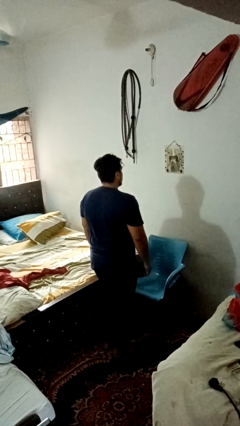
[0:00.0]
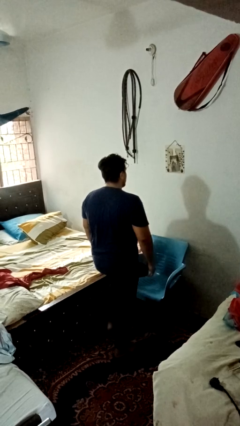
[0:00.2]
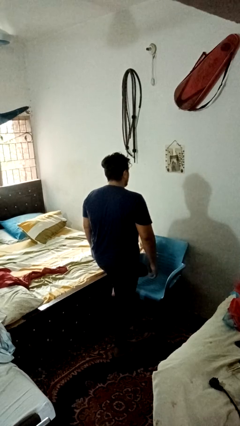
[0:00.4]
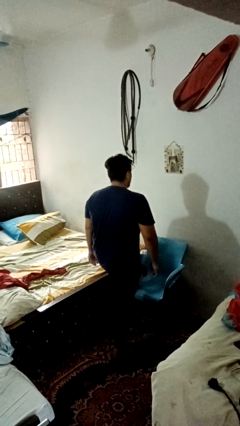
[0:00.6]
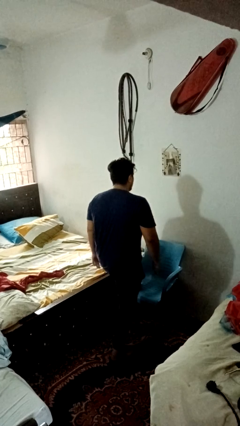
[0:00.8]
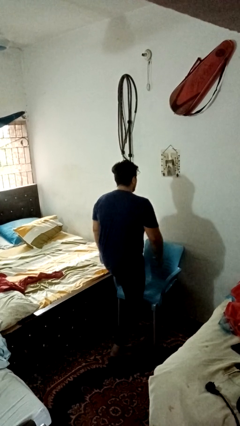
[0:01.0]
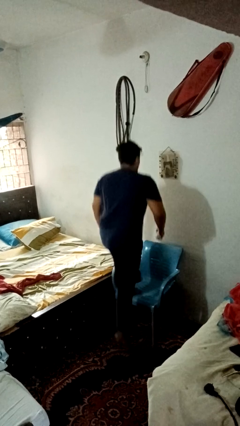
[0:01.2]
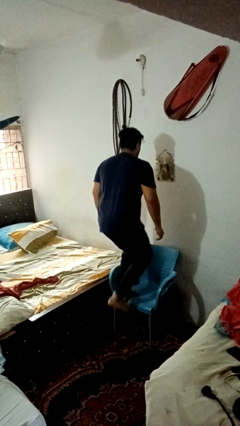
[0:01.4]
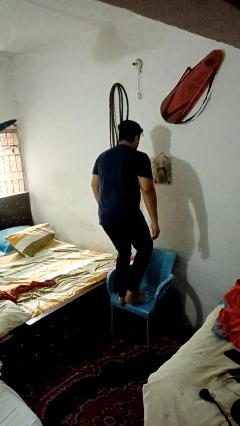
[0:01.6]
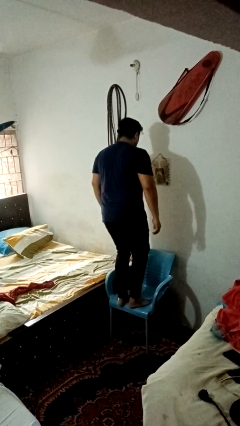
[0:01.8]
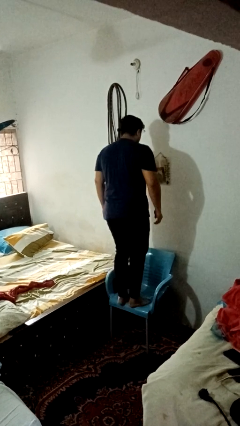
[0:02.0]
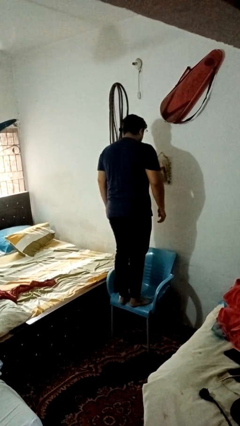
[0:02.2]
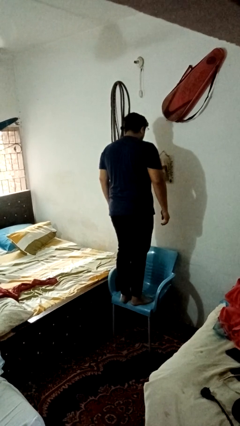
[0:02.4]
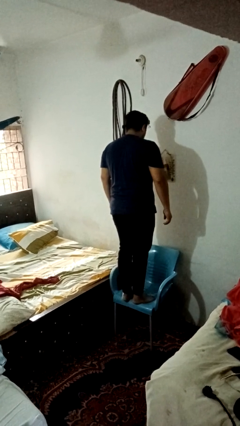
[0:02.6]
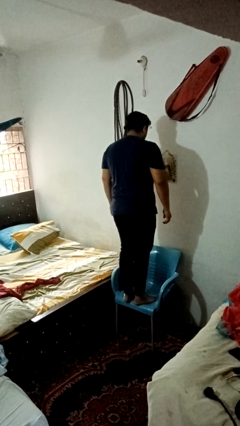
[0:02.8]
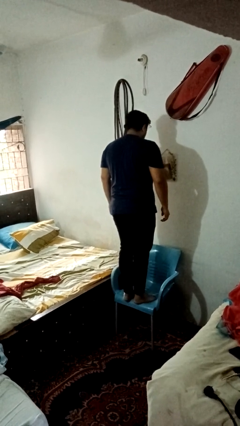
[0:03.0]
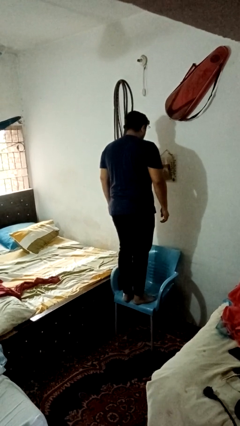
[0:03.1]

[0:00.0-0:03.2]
person climbs on chair

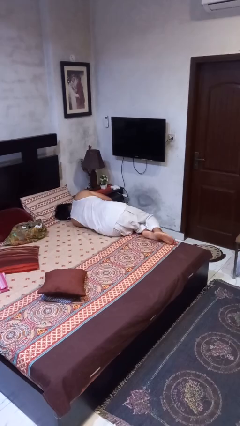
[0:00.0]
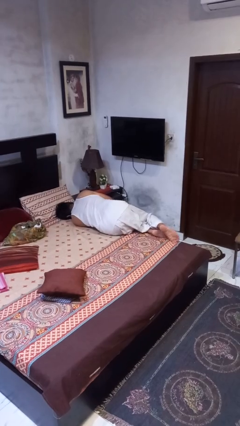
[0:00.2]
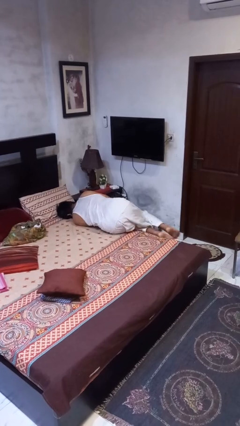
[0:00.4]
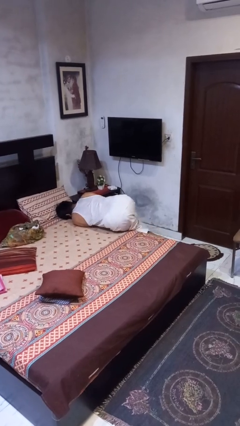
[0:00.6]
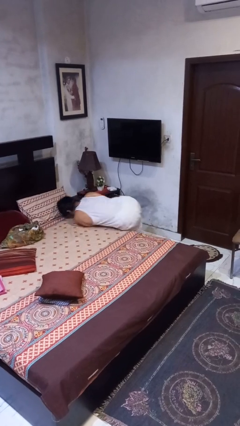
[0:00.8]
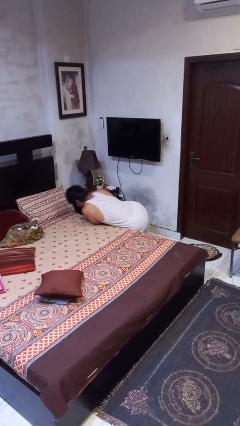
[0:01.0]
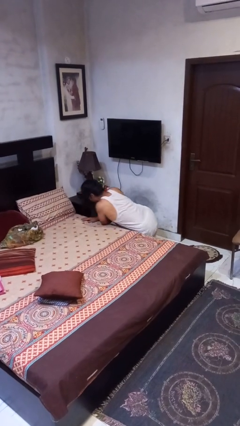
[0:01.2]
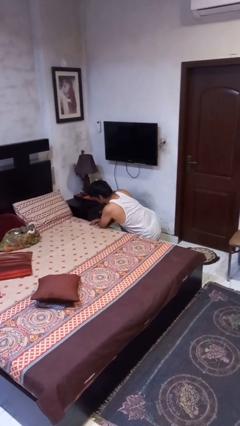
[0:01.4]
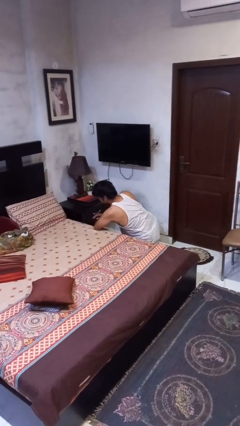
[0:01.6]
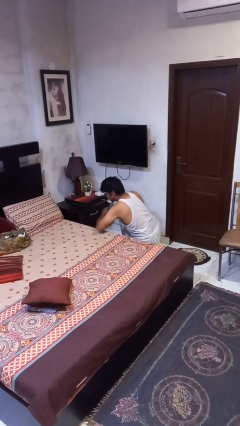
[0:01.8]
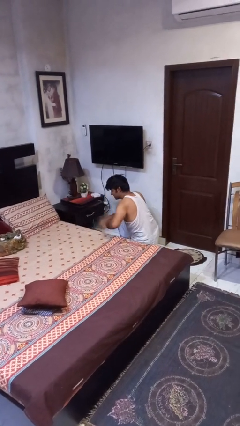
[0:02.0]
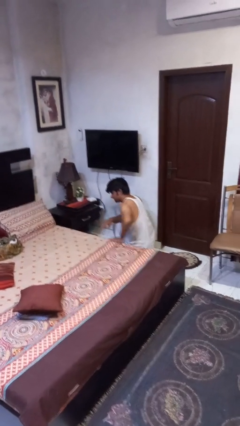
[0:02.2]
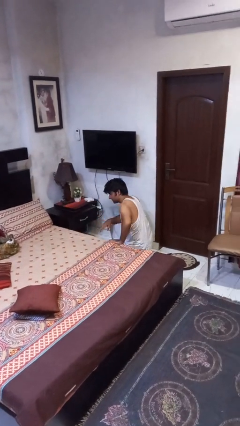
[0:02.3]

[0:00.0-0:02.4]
person falls from bed

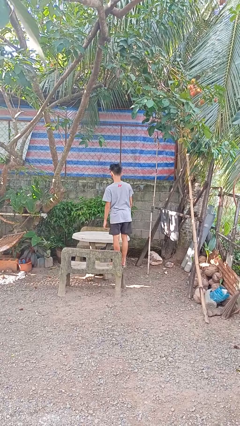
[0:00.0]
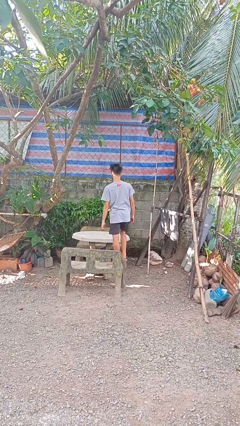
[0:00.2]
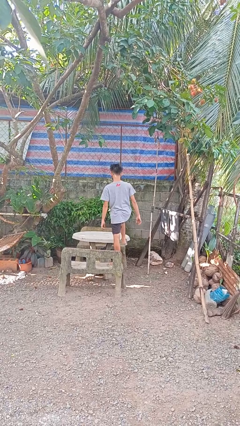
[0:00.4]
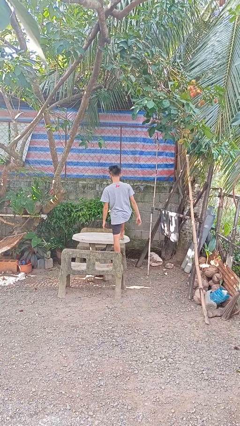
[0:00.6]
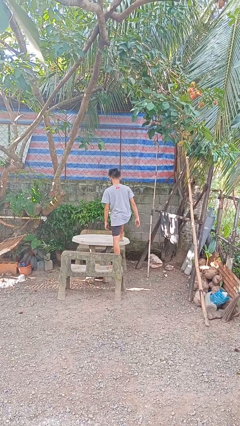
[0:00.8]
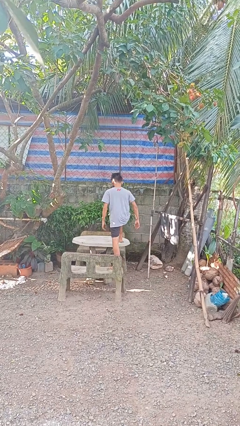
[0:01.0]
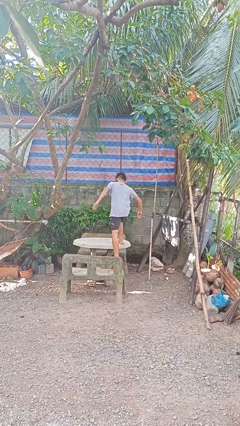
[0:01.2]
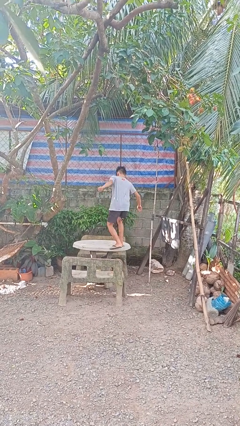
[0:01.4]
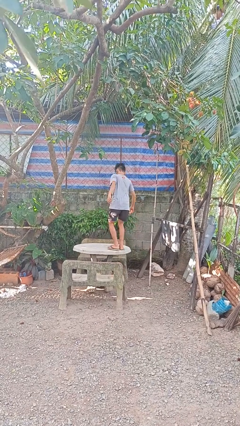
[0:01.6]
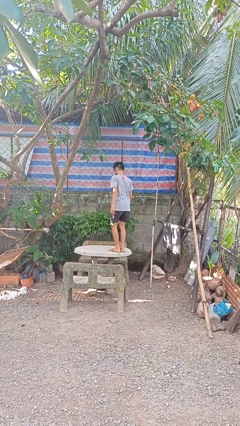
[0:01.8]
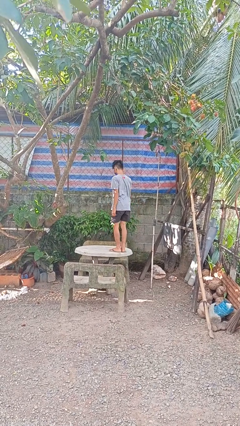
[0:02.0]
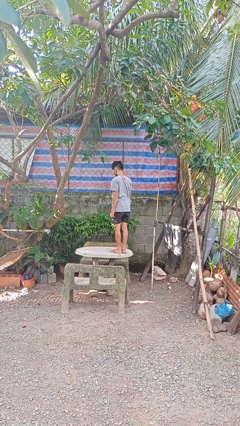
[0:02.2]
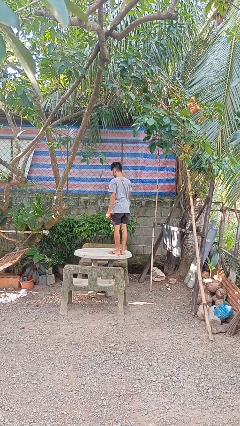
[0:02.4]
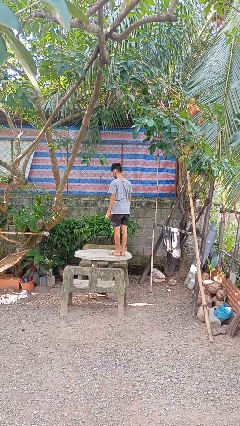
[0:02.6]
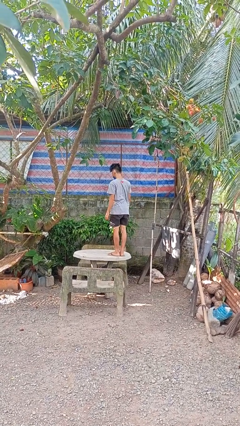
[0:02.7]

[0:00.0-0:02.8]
person climbs on table

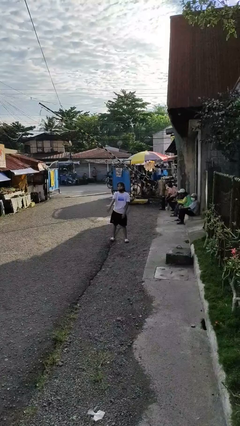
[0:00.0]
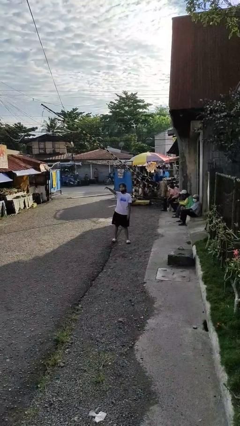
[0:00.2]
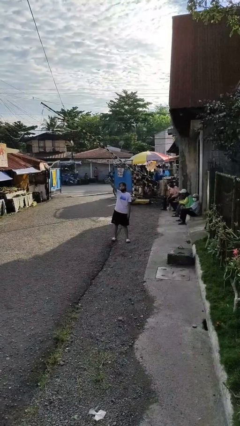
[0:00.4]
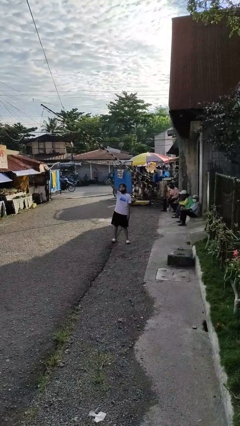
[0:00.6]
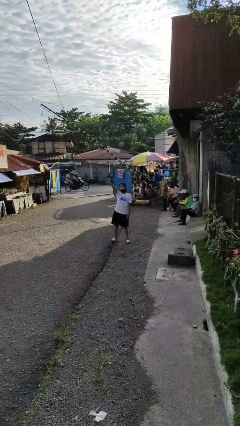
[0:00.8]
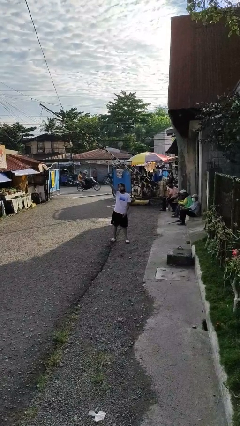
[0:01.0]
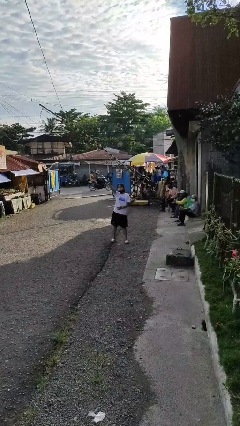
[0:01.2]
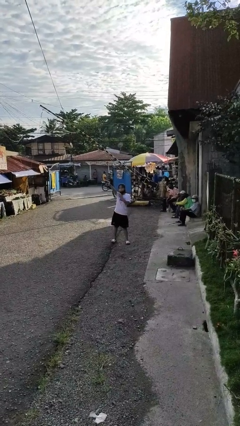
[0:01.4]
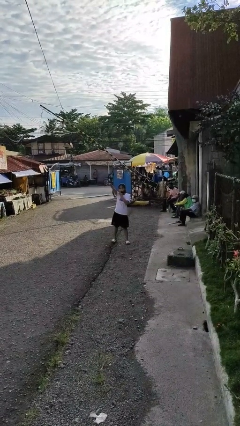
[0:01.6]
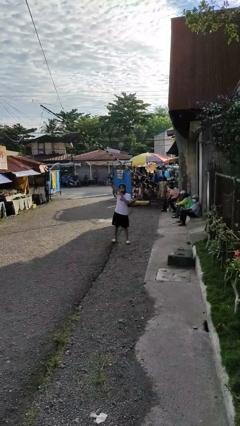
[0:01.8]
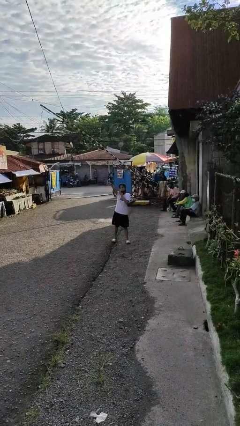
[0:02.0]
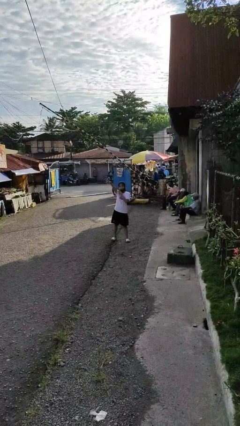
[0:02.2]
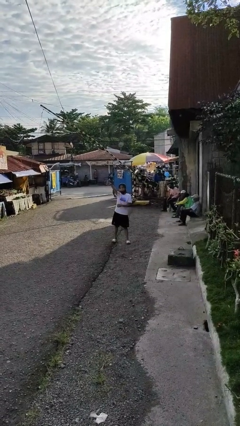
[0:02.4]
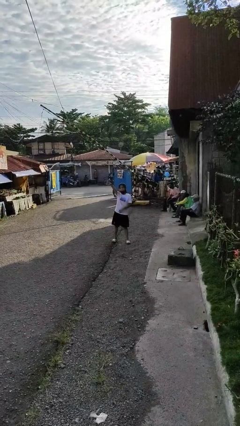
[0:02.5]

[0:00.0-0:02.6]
person points at person

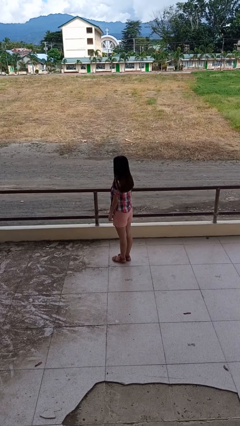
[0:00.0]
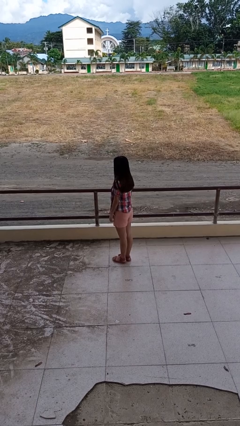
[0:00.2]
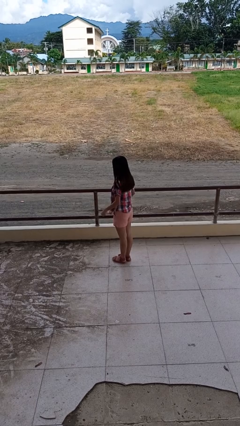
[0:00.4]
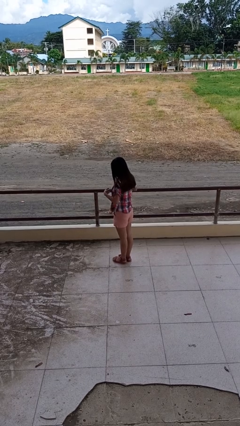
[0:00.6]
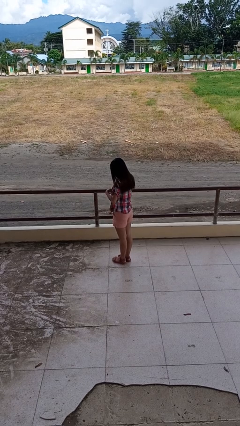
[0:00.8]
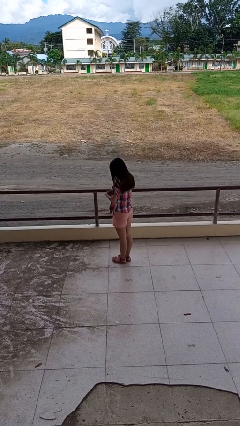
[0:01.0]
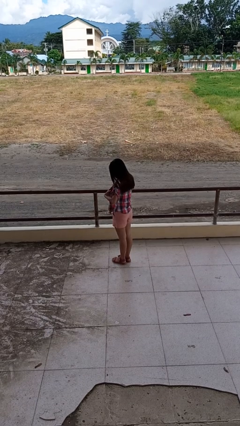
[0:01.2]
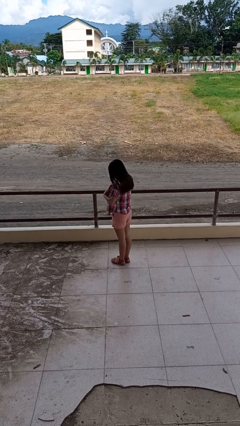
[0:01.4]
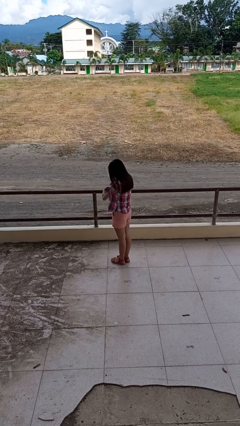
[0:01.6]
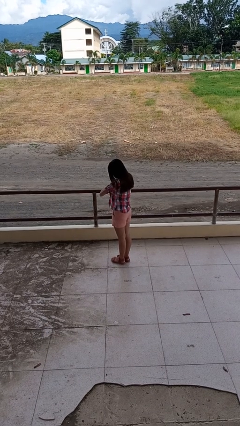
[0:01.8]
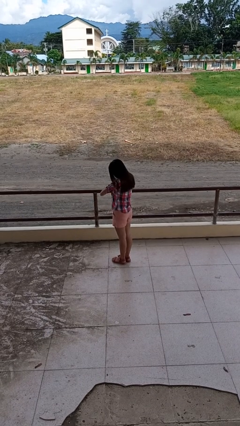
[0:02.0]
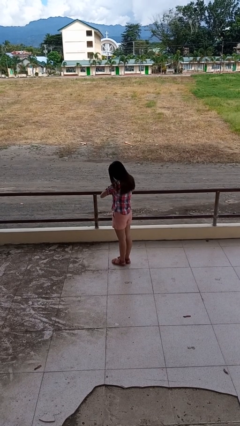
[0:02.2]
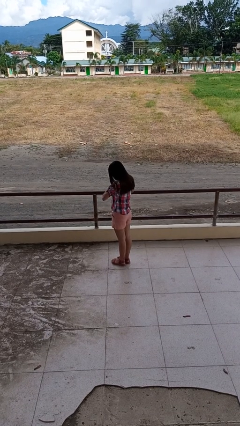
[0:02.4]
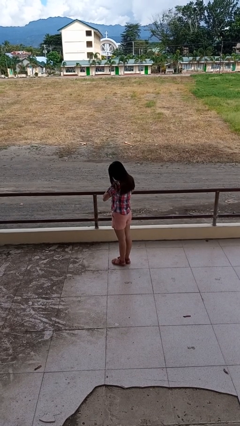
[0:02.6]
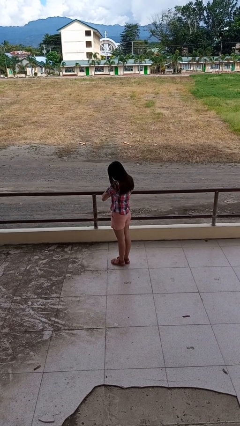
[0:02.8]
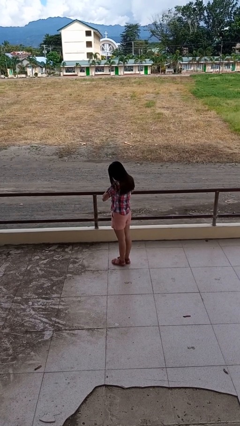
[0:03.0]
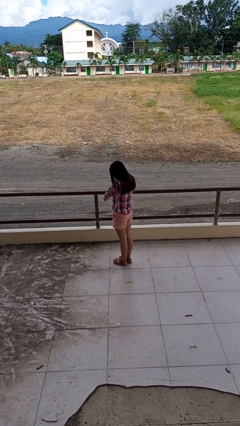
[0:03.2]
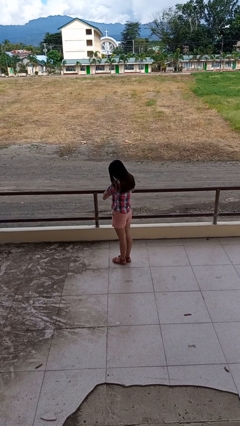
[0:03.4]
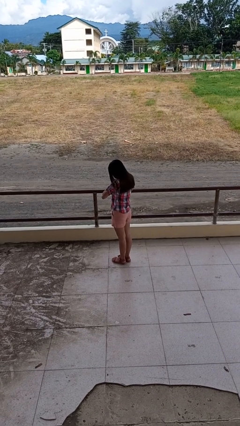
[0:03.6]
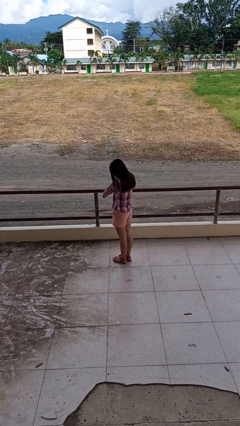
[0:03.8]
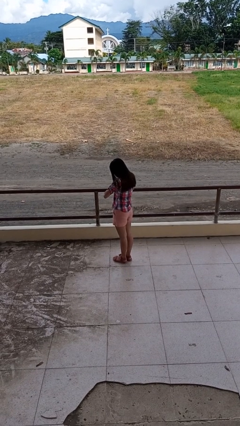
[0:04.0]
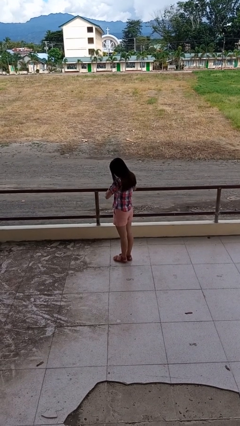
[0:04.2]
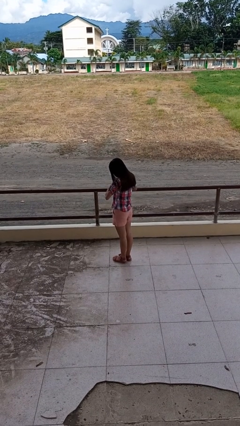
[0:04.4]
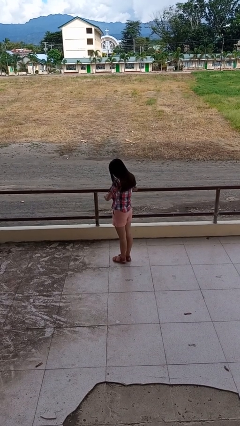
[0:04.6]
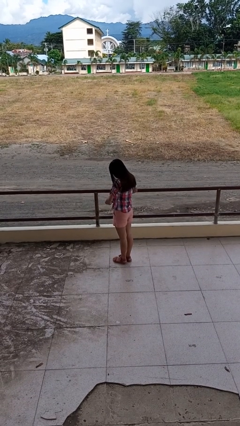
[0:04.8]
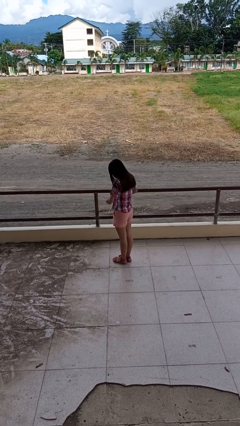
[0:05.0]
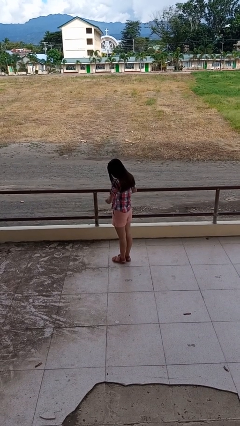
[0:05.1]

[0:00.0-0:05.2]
person buttons shirt

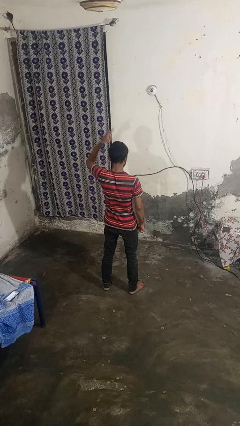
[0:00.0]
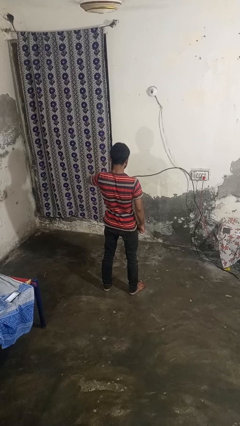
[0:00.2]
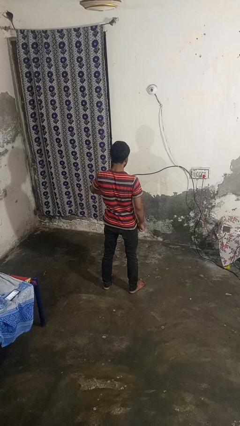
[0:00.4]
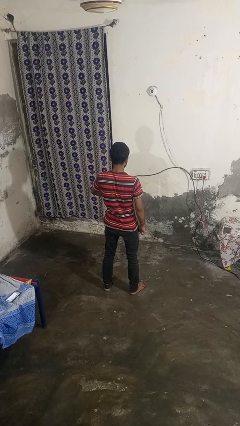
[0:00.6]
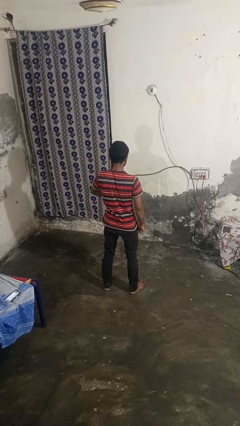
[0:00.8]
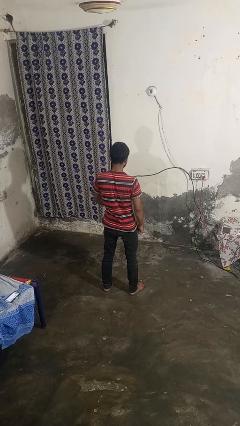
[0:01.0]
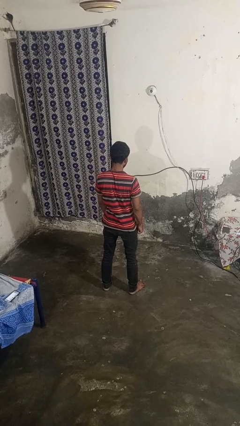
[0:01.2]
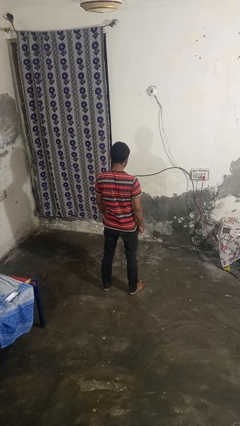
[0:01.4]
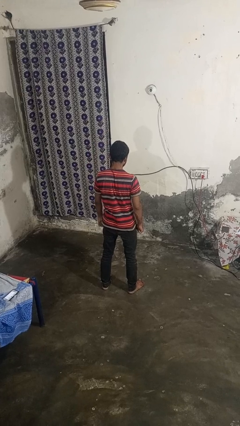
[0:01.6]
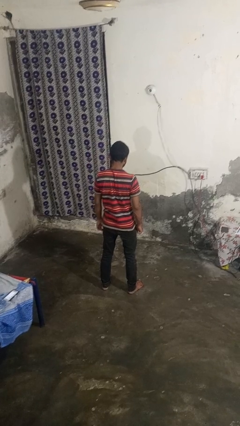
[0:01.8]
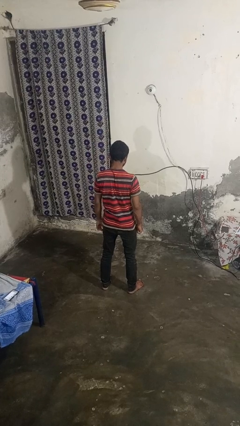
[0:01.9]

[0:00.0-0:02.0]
person gestures swipe down
